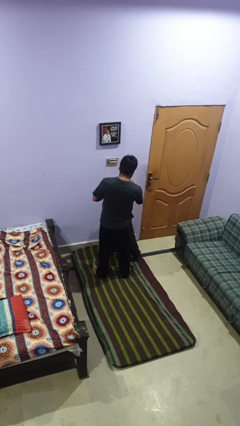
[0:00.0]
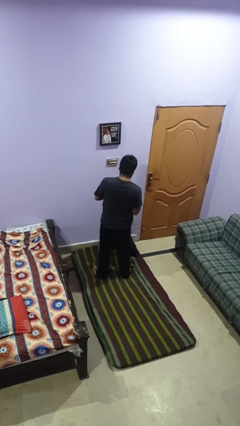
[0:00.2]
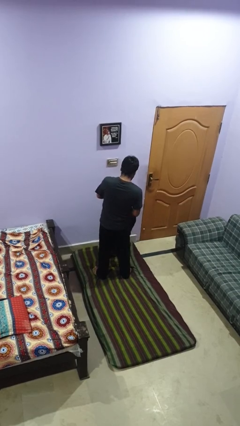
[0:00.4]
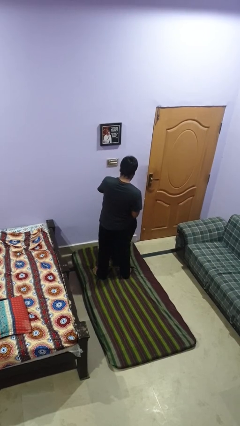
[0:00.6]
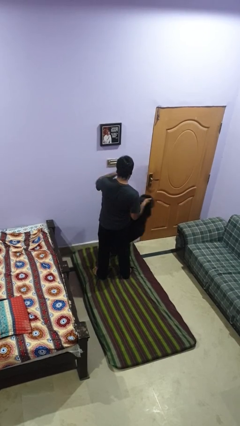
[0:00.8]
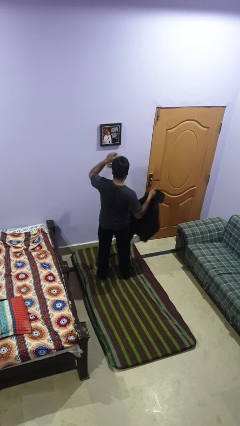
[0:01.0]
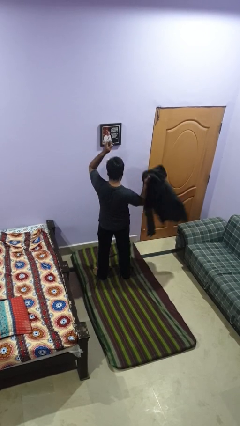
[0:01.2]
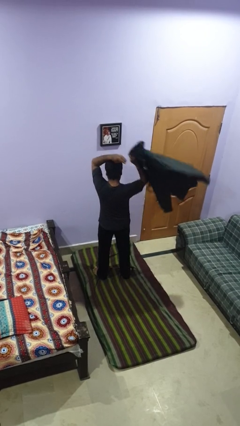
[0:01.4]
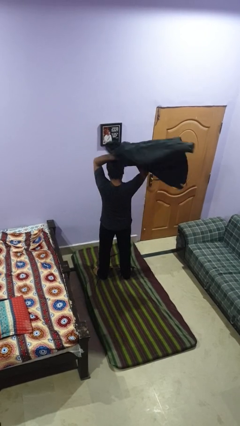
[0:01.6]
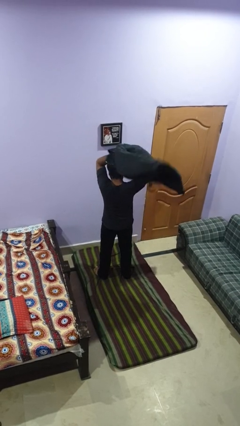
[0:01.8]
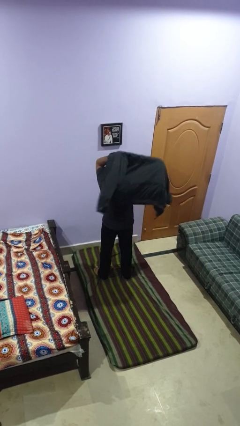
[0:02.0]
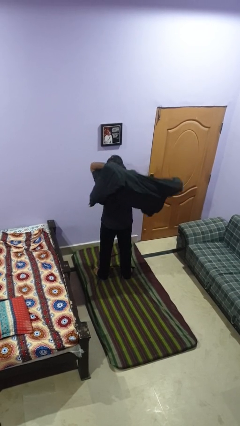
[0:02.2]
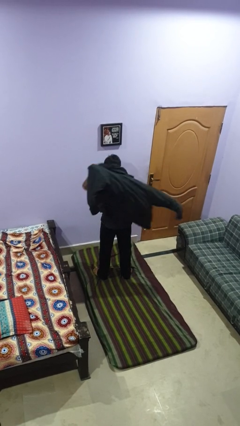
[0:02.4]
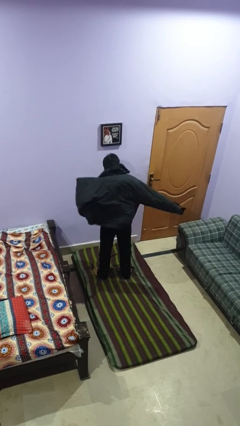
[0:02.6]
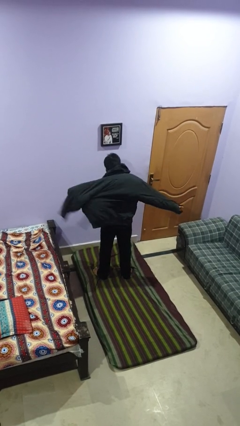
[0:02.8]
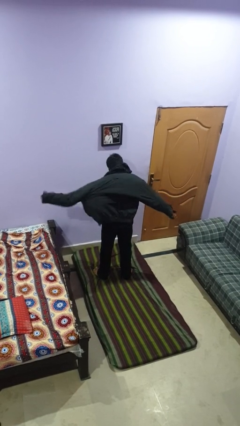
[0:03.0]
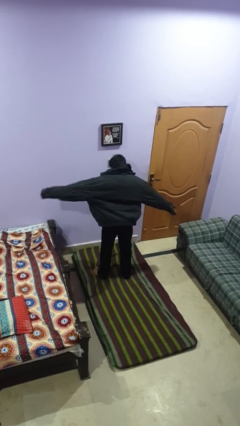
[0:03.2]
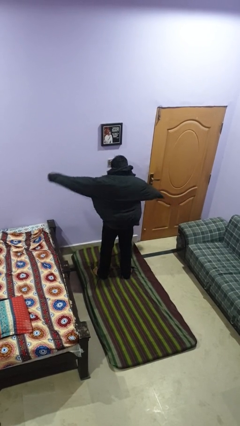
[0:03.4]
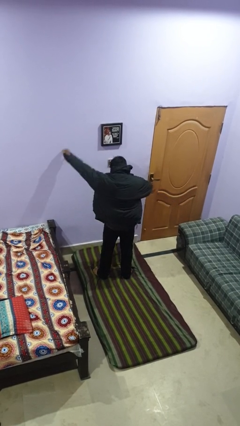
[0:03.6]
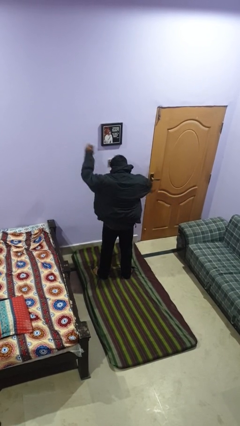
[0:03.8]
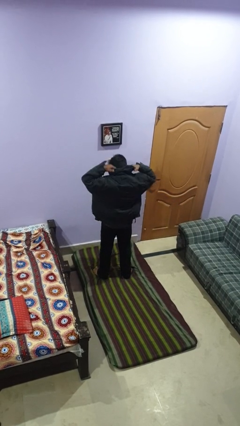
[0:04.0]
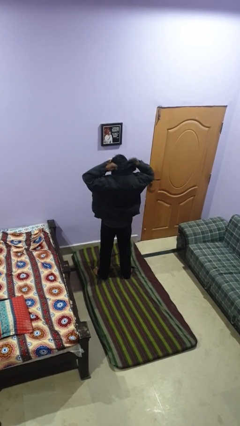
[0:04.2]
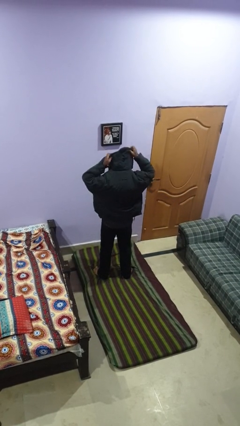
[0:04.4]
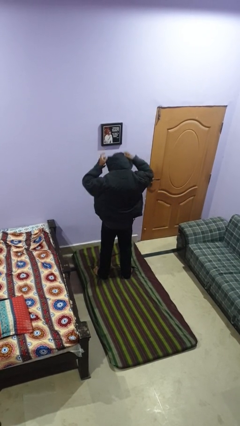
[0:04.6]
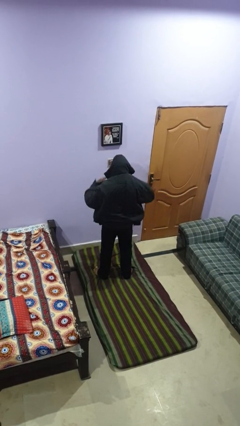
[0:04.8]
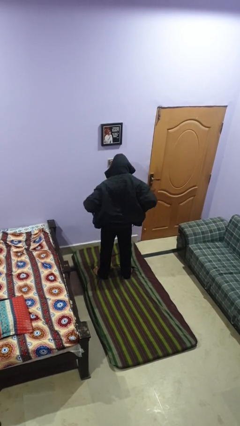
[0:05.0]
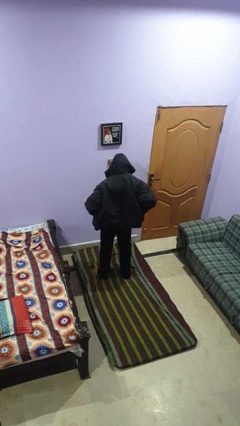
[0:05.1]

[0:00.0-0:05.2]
person puts on hoodie

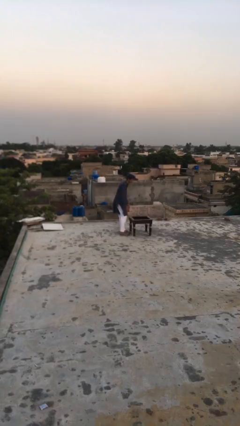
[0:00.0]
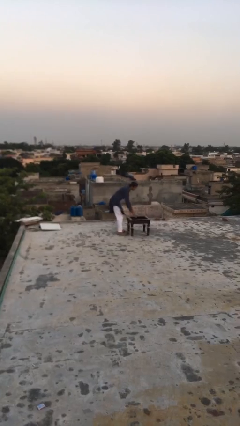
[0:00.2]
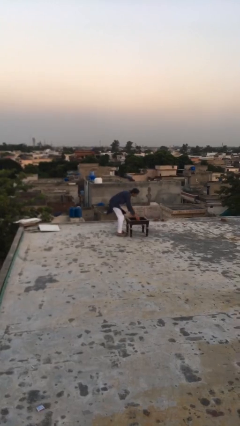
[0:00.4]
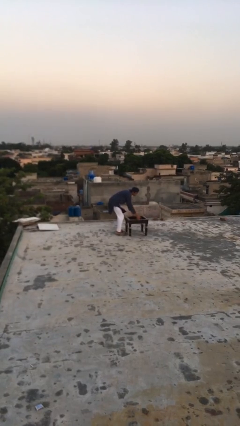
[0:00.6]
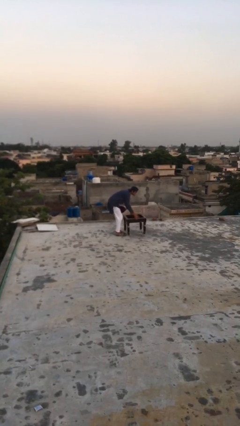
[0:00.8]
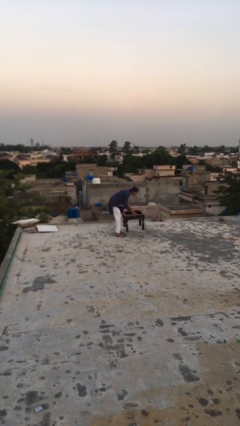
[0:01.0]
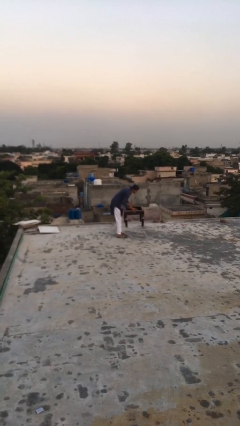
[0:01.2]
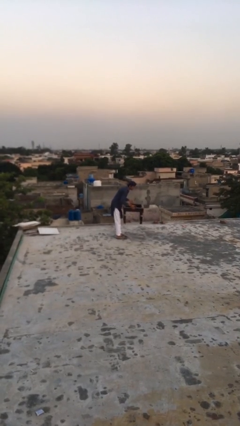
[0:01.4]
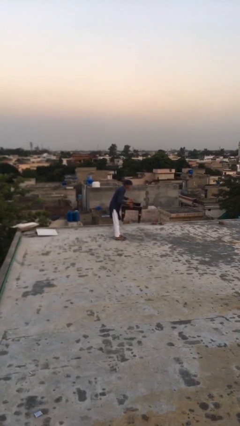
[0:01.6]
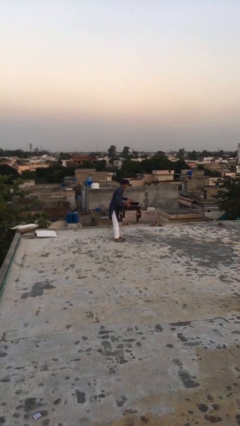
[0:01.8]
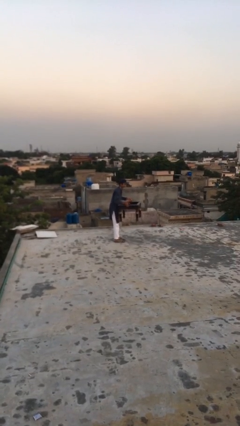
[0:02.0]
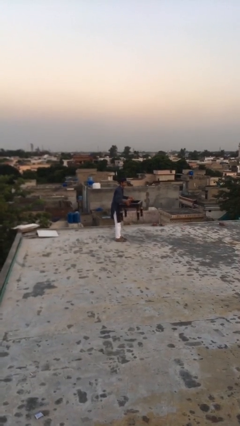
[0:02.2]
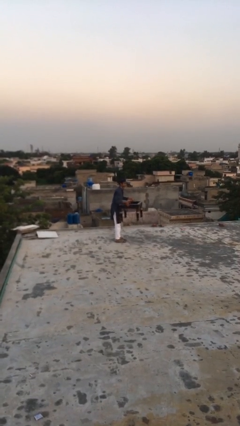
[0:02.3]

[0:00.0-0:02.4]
person picks up object from floor

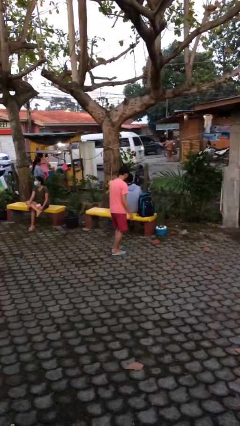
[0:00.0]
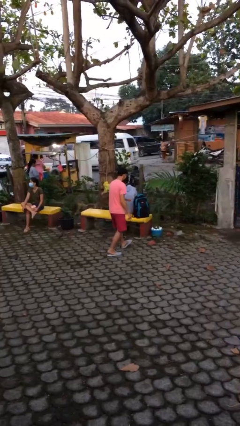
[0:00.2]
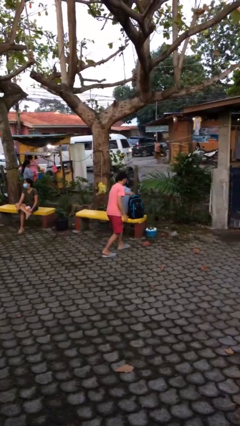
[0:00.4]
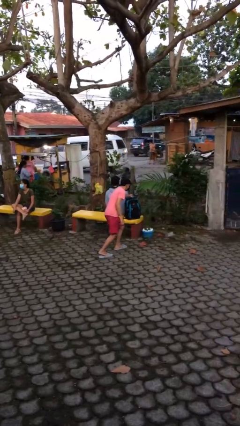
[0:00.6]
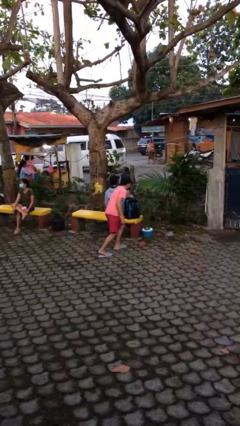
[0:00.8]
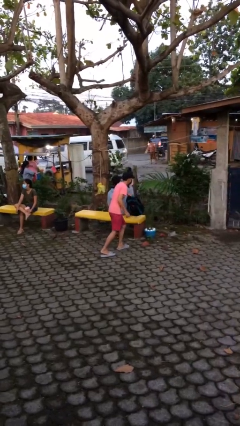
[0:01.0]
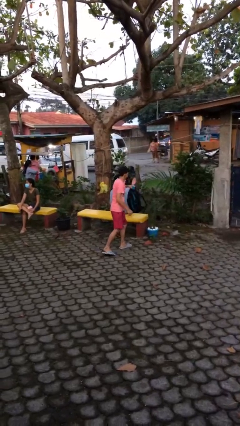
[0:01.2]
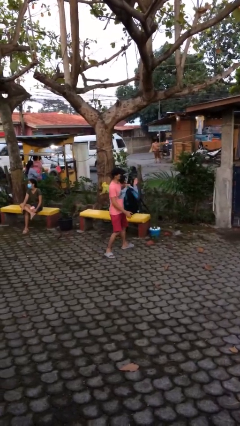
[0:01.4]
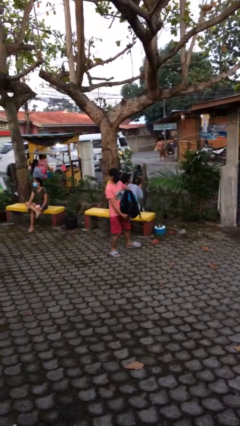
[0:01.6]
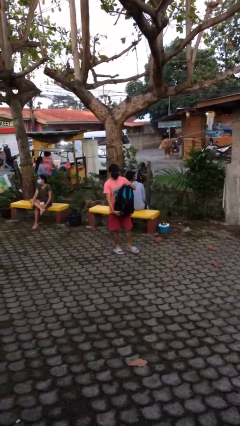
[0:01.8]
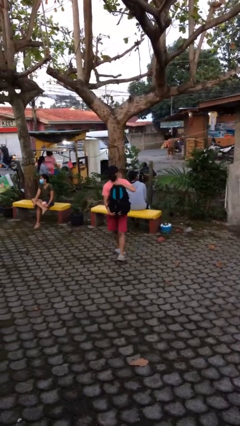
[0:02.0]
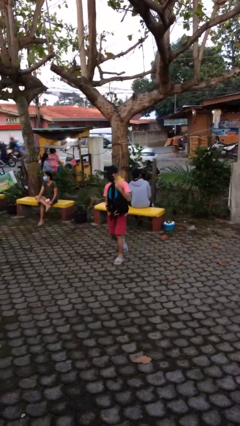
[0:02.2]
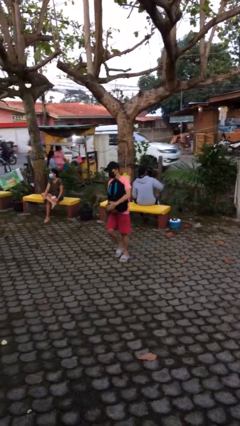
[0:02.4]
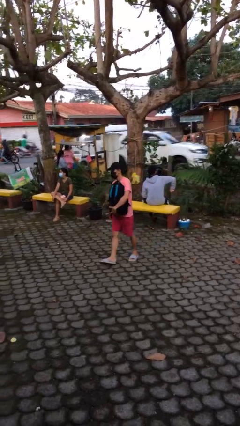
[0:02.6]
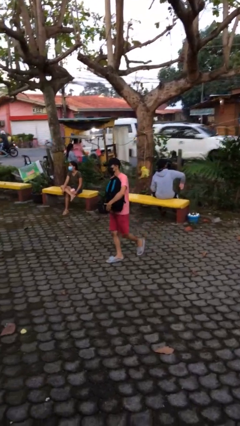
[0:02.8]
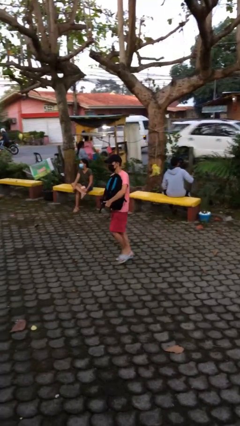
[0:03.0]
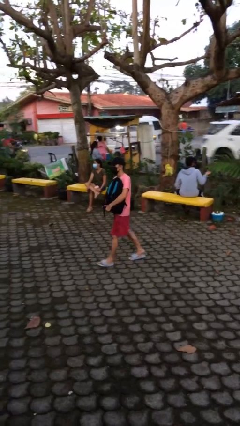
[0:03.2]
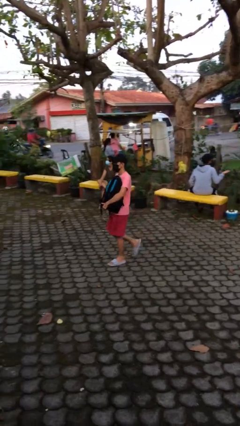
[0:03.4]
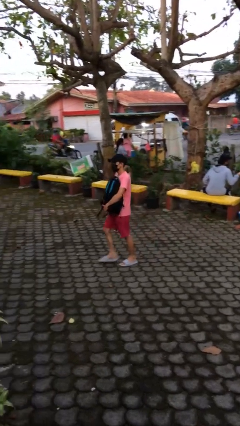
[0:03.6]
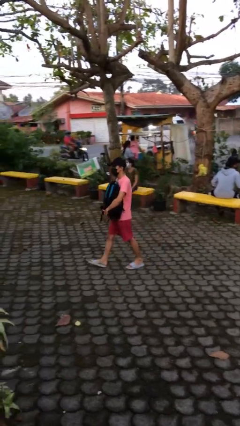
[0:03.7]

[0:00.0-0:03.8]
person steals object from person

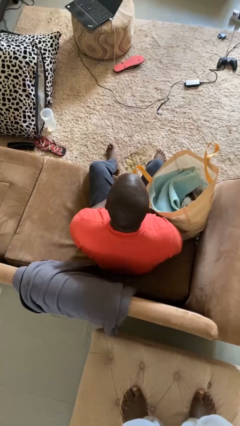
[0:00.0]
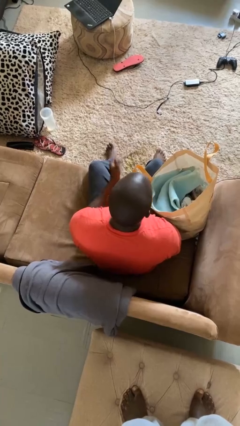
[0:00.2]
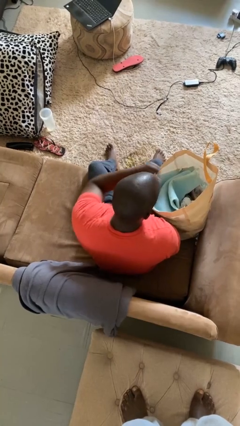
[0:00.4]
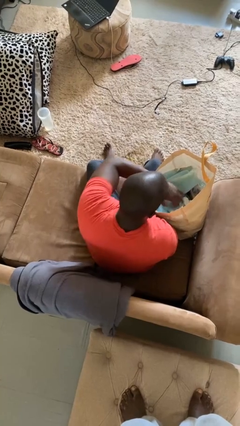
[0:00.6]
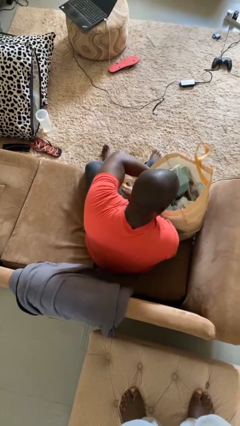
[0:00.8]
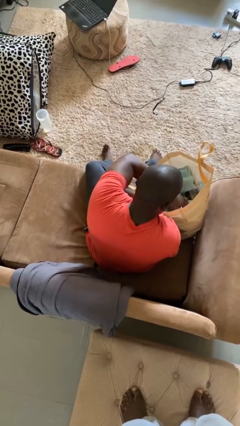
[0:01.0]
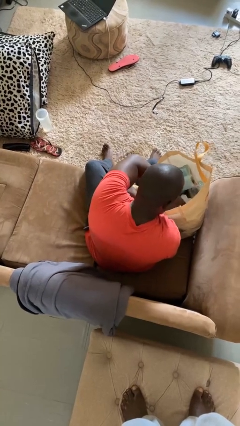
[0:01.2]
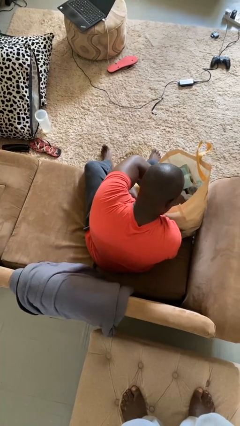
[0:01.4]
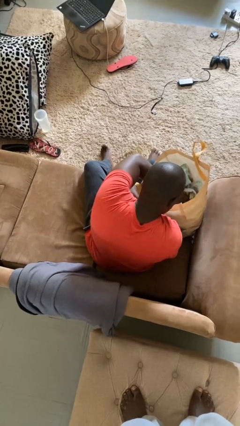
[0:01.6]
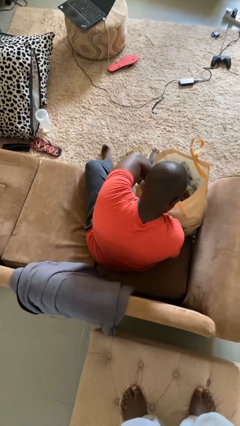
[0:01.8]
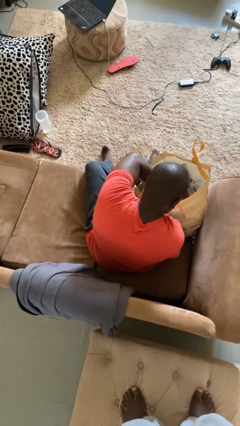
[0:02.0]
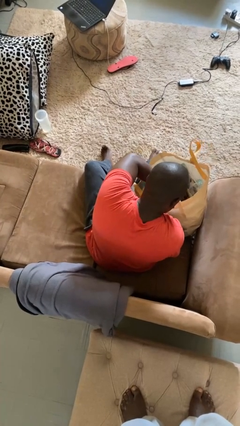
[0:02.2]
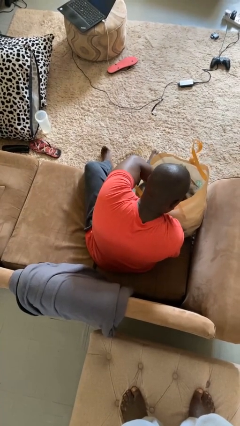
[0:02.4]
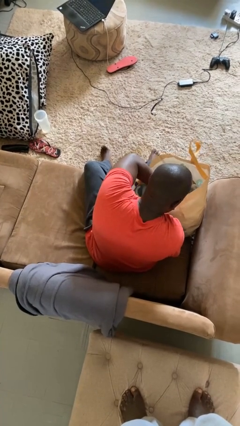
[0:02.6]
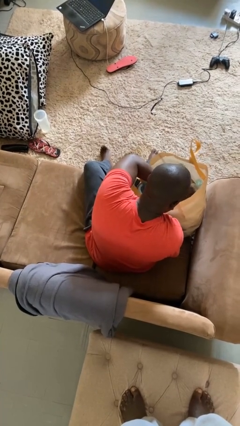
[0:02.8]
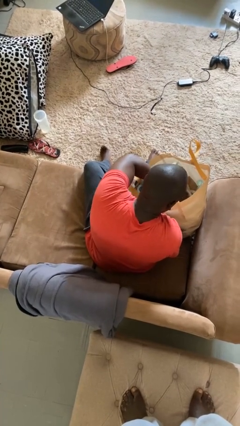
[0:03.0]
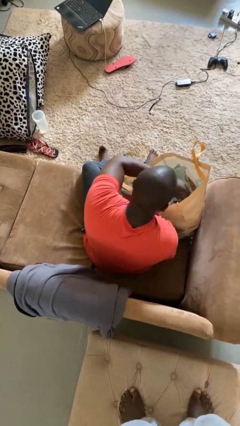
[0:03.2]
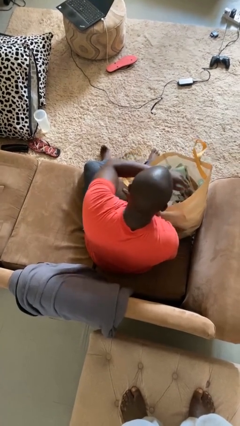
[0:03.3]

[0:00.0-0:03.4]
person searches in bag

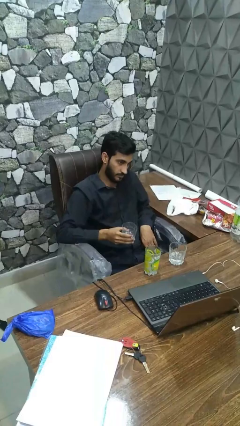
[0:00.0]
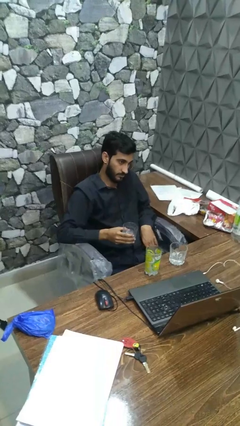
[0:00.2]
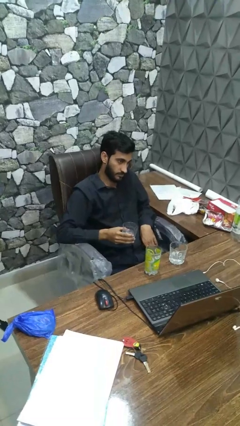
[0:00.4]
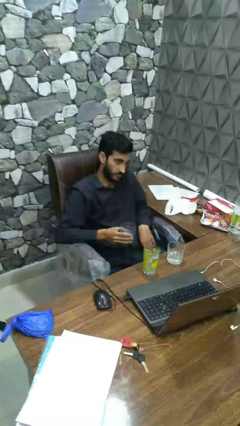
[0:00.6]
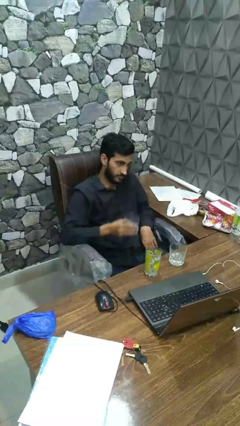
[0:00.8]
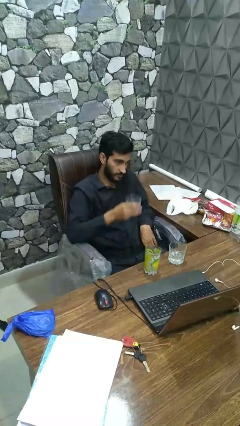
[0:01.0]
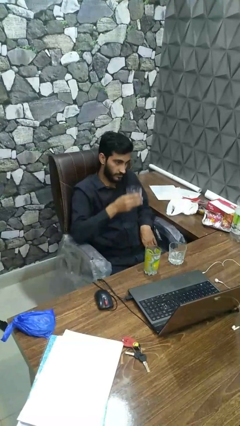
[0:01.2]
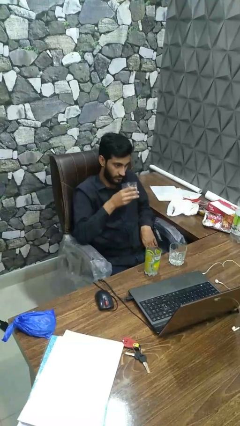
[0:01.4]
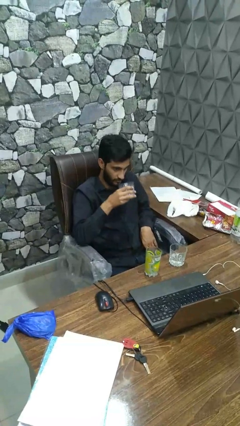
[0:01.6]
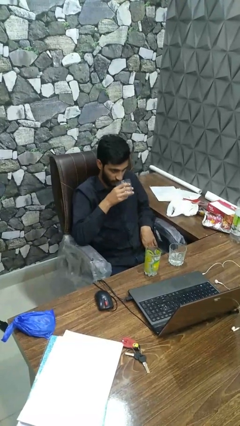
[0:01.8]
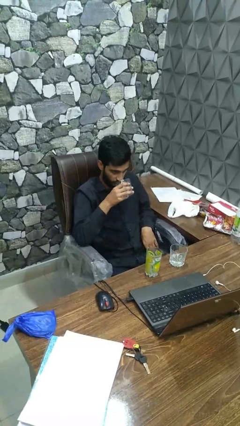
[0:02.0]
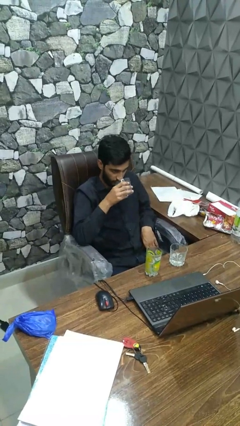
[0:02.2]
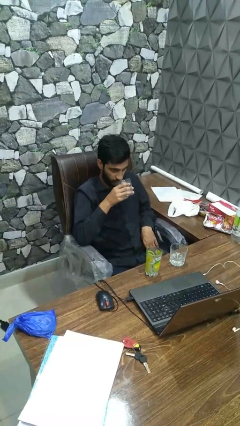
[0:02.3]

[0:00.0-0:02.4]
person drinks from shotglass

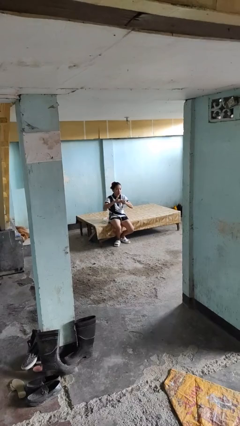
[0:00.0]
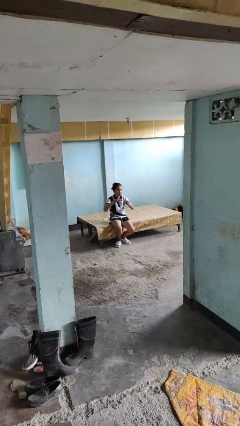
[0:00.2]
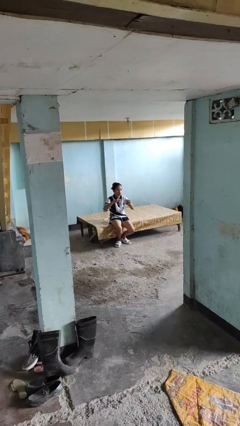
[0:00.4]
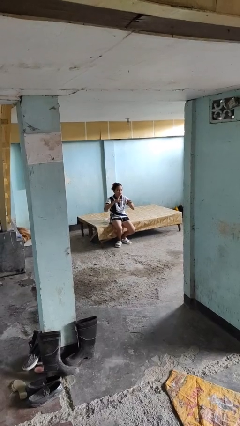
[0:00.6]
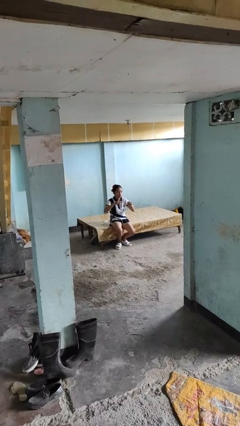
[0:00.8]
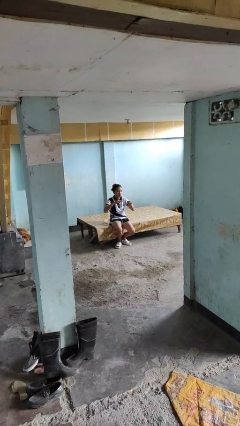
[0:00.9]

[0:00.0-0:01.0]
person takes off ring
